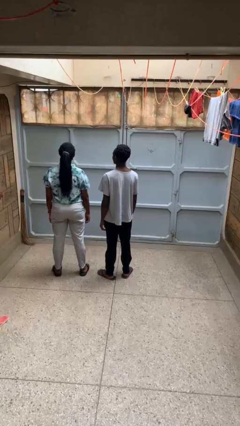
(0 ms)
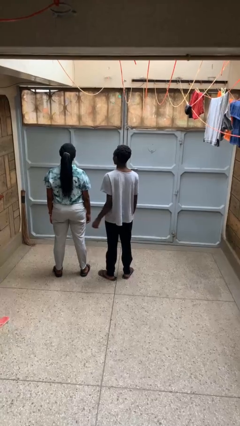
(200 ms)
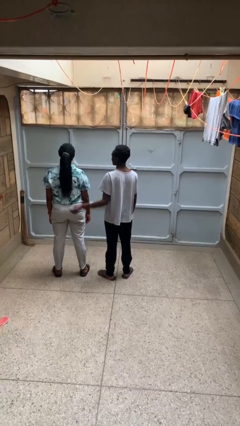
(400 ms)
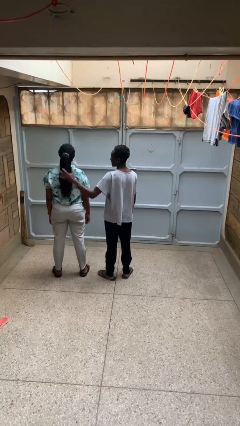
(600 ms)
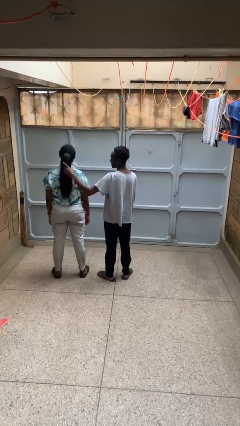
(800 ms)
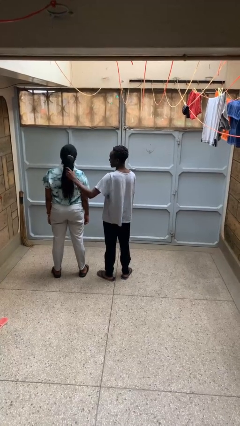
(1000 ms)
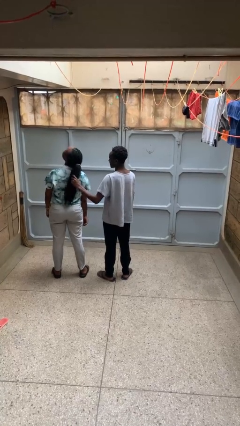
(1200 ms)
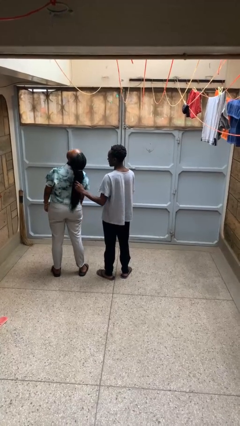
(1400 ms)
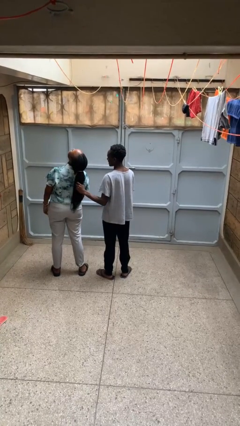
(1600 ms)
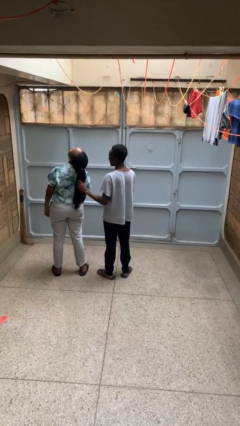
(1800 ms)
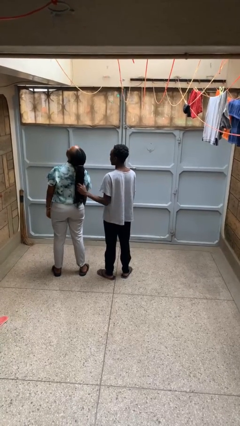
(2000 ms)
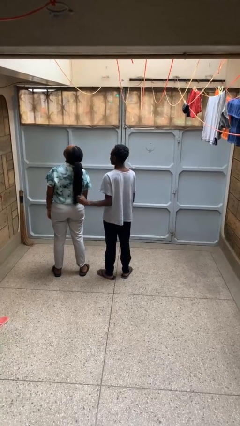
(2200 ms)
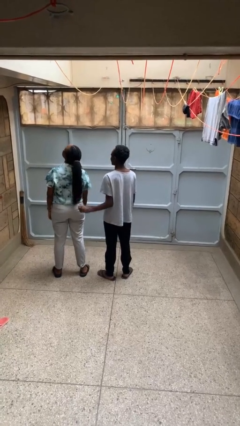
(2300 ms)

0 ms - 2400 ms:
person grabs person by hair

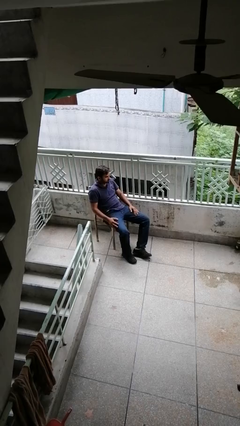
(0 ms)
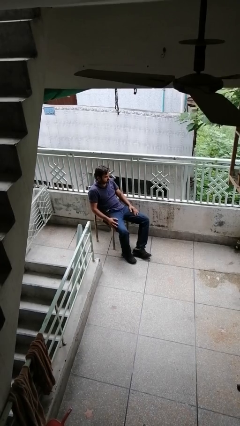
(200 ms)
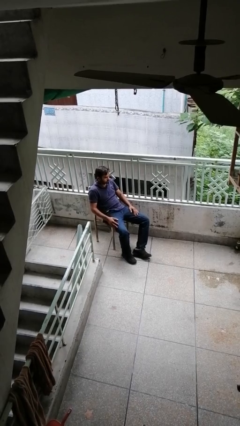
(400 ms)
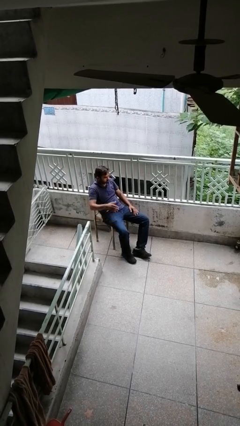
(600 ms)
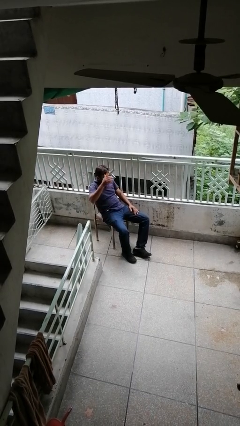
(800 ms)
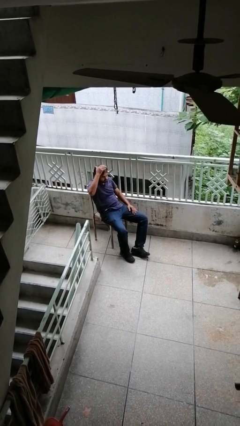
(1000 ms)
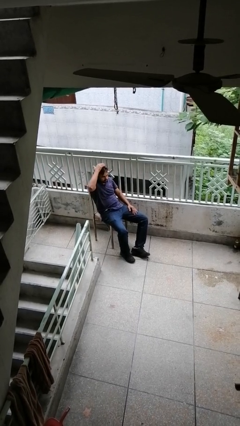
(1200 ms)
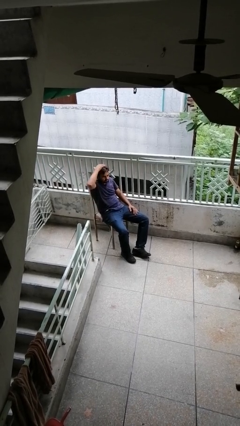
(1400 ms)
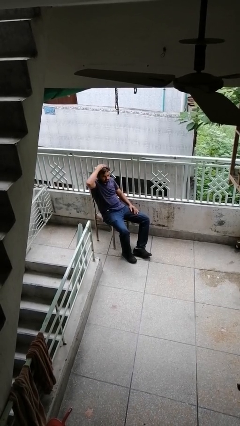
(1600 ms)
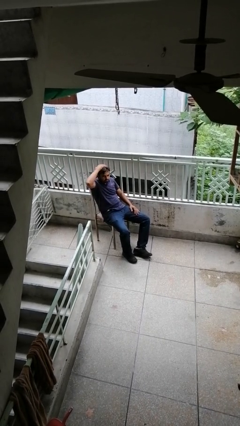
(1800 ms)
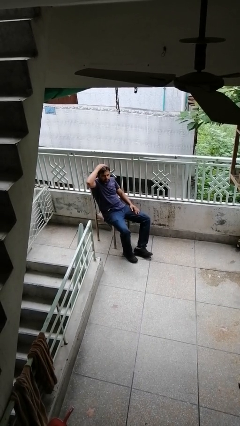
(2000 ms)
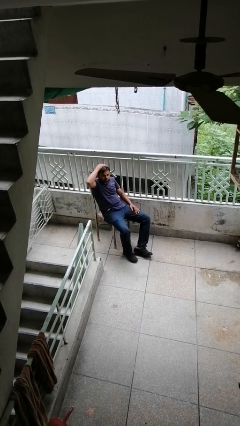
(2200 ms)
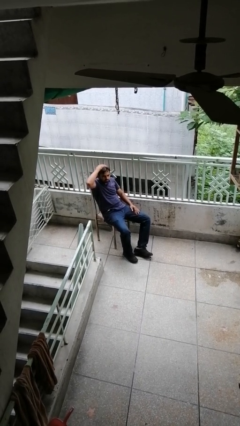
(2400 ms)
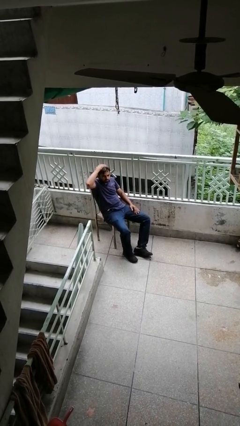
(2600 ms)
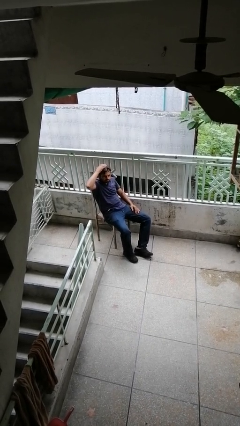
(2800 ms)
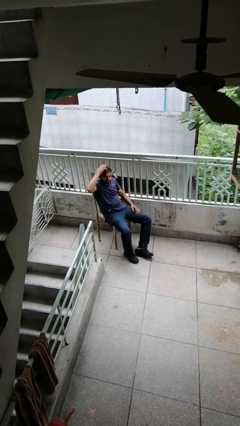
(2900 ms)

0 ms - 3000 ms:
person pats head

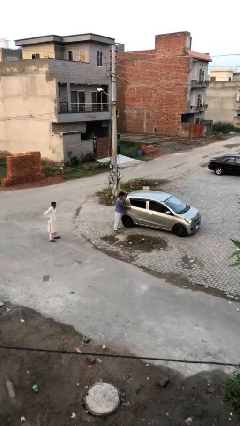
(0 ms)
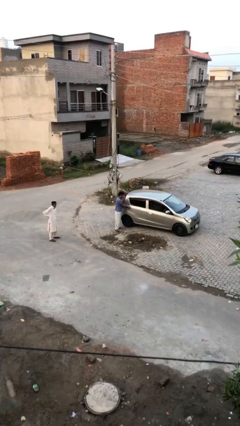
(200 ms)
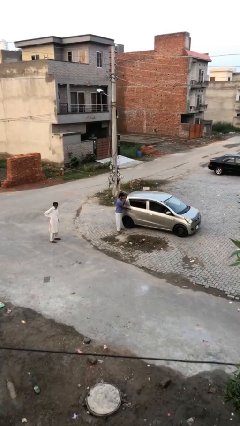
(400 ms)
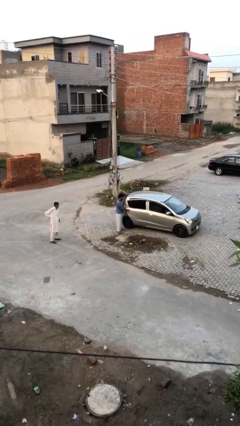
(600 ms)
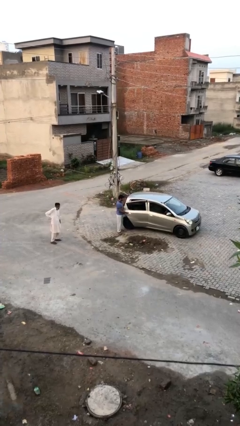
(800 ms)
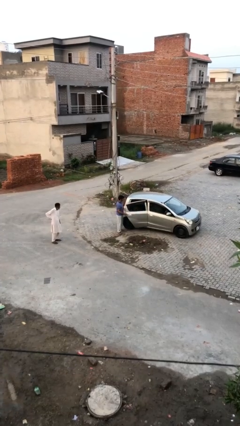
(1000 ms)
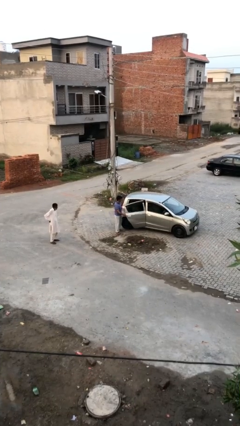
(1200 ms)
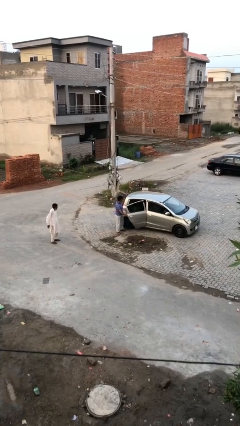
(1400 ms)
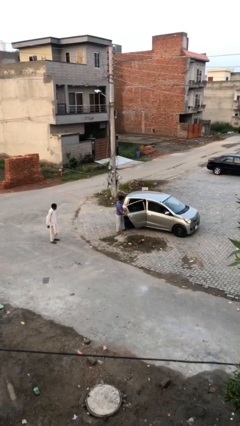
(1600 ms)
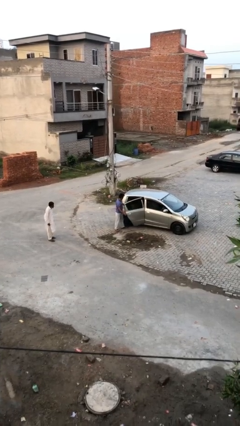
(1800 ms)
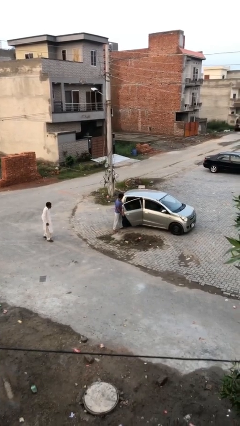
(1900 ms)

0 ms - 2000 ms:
person opens car door

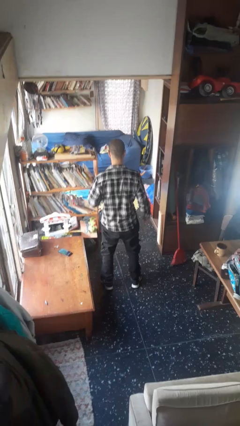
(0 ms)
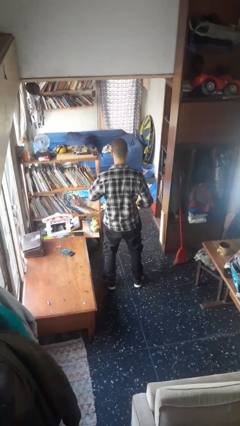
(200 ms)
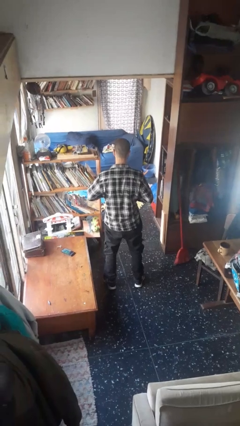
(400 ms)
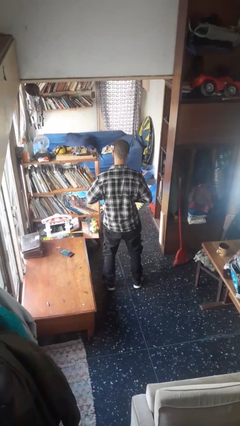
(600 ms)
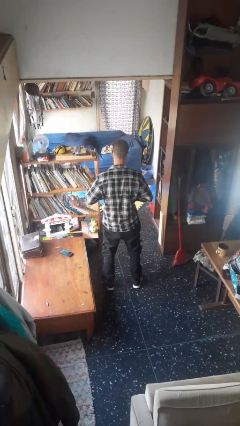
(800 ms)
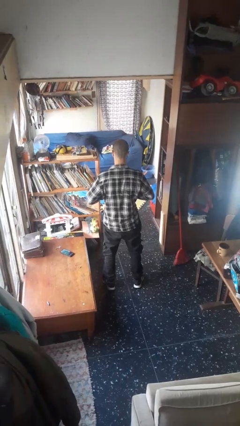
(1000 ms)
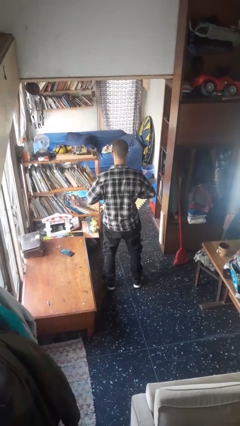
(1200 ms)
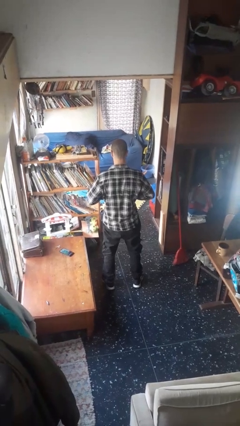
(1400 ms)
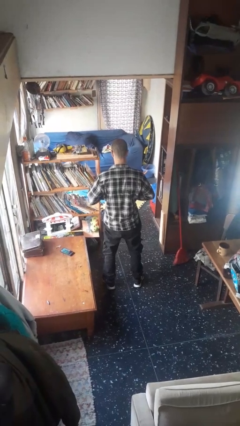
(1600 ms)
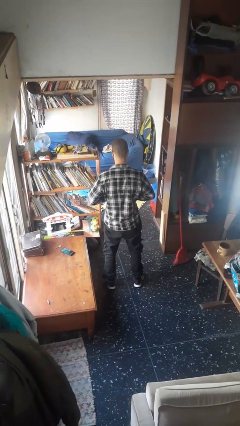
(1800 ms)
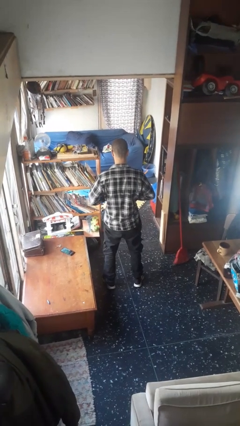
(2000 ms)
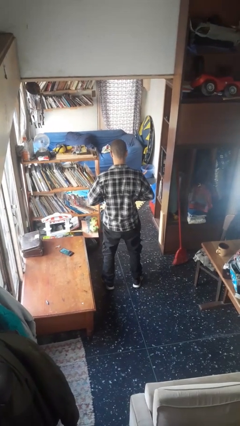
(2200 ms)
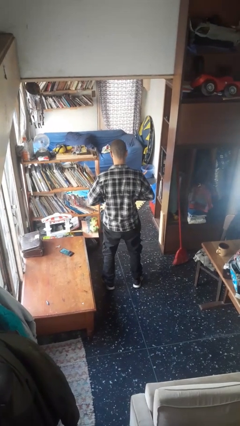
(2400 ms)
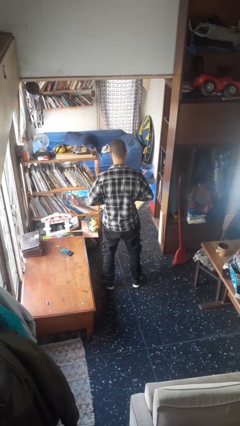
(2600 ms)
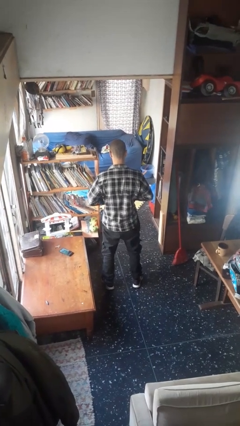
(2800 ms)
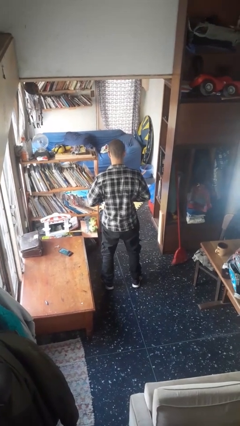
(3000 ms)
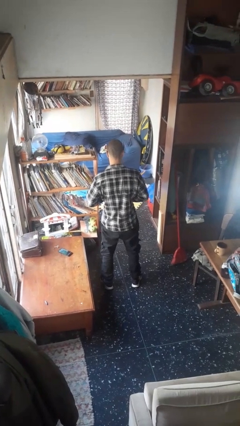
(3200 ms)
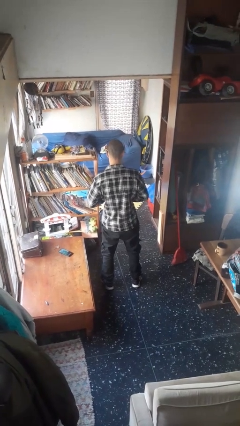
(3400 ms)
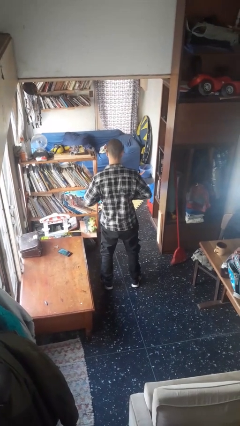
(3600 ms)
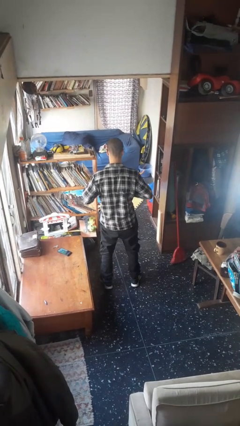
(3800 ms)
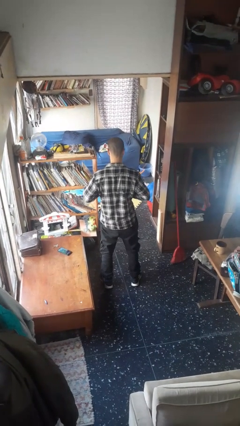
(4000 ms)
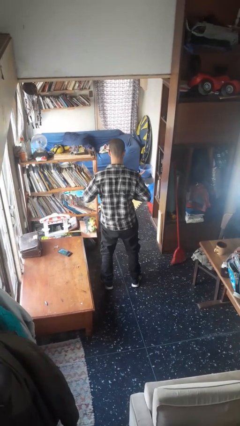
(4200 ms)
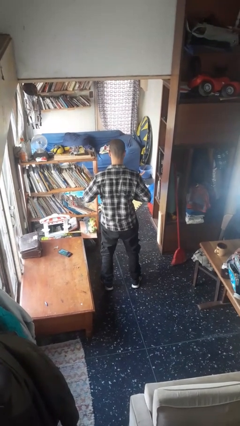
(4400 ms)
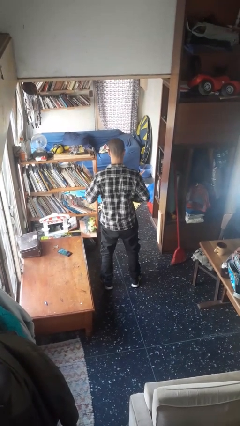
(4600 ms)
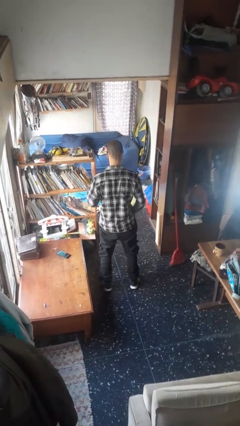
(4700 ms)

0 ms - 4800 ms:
person buttons shirt

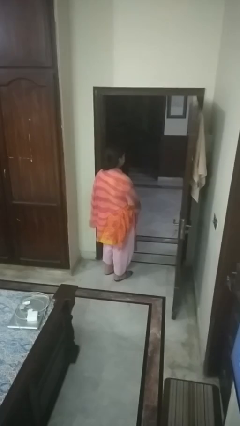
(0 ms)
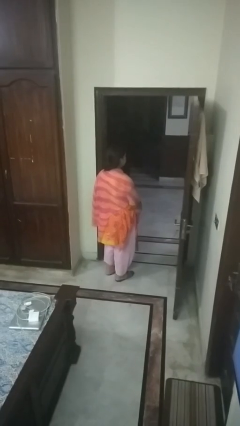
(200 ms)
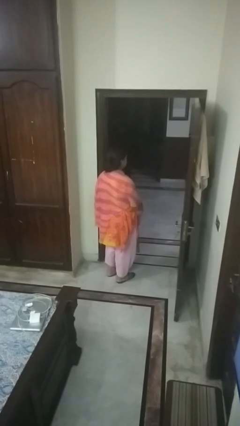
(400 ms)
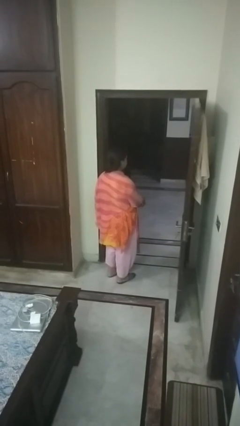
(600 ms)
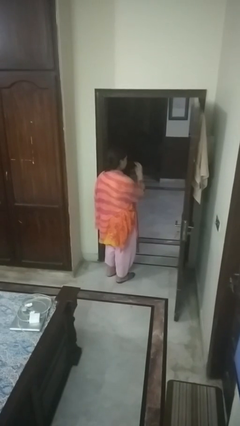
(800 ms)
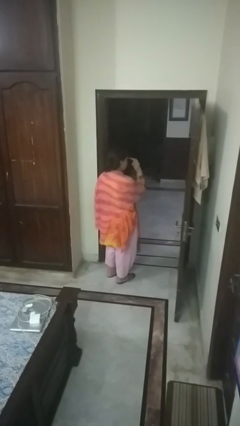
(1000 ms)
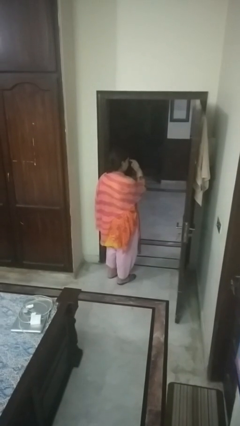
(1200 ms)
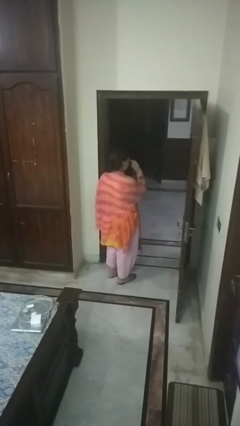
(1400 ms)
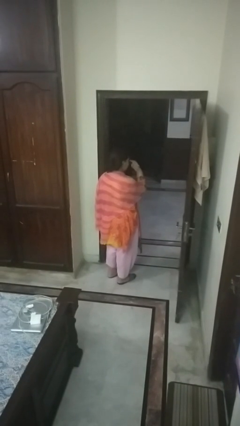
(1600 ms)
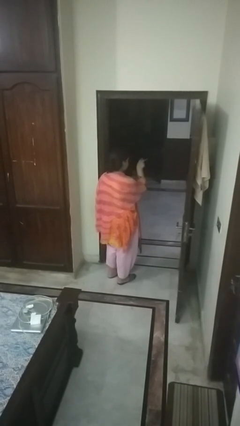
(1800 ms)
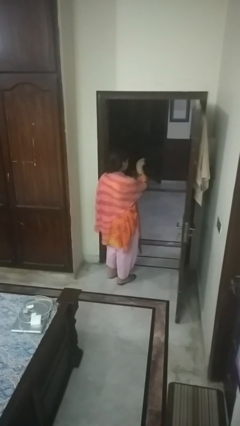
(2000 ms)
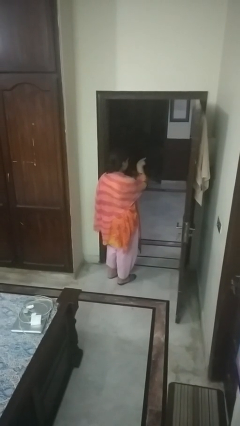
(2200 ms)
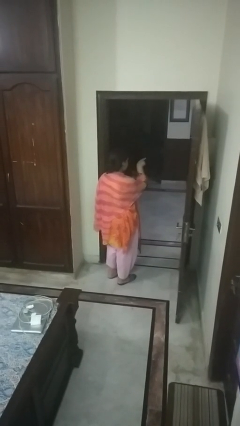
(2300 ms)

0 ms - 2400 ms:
person gestures watch closely

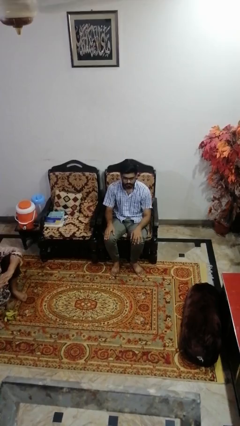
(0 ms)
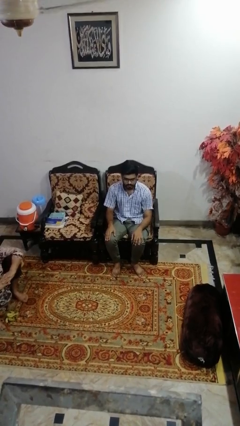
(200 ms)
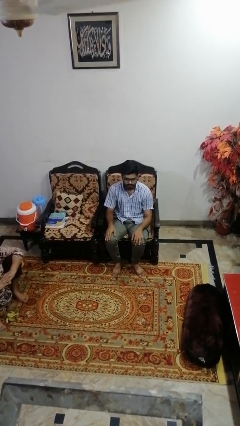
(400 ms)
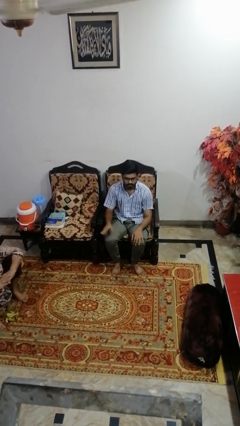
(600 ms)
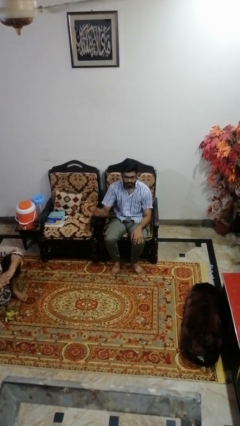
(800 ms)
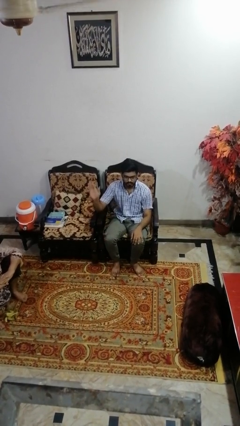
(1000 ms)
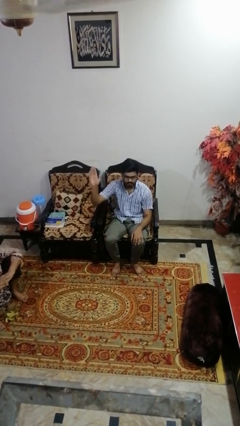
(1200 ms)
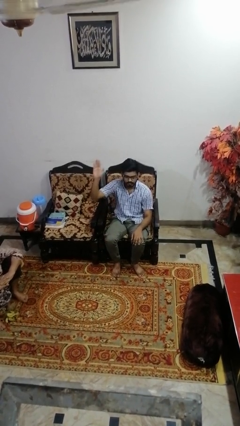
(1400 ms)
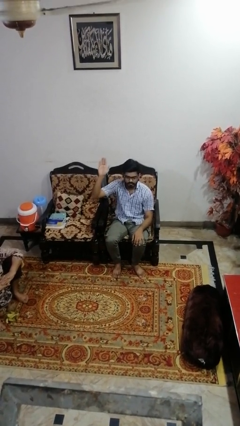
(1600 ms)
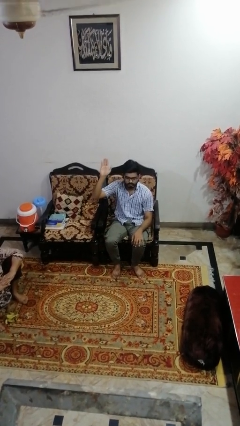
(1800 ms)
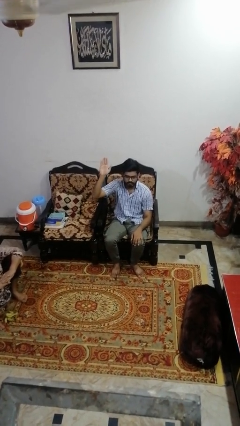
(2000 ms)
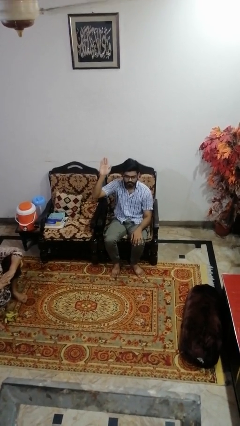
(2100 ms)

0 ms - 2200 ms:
person gestures raise hand

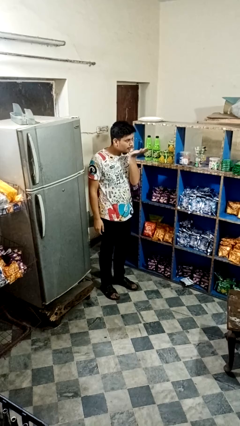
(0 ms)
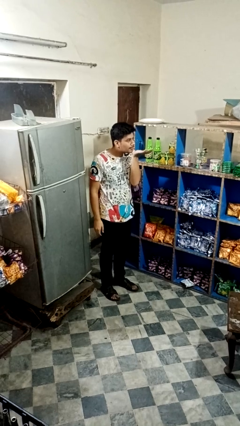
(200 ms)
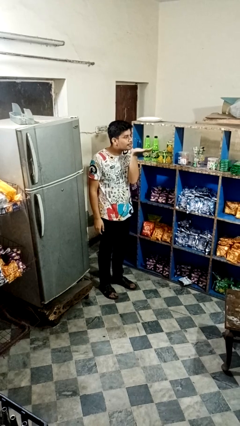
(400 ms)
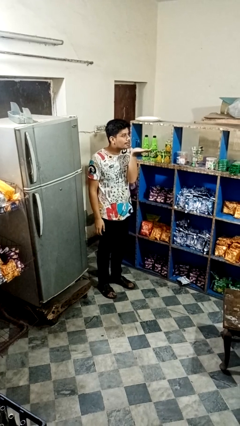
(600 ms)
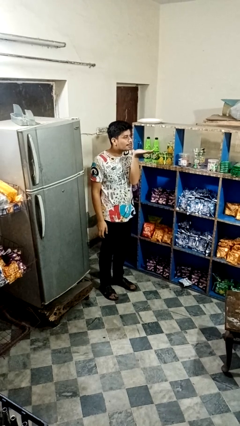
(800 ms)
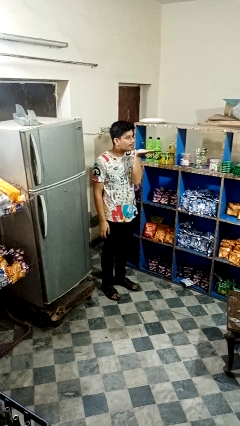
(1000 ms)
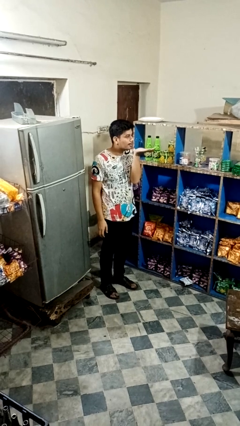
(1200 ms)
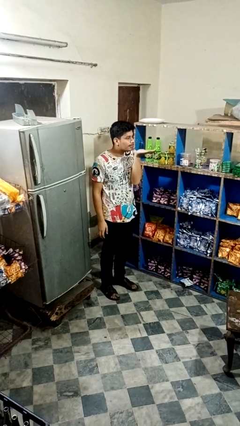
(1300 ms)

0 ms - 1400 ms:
person gestures blow kiss
